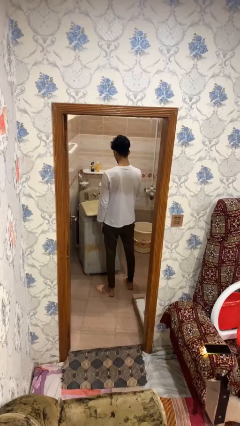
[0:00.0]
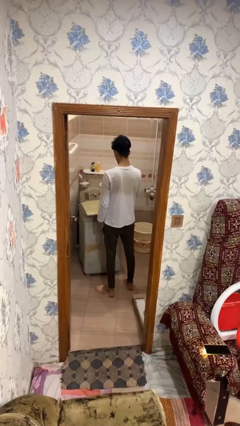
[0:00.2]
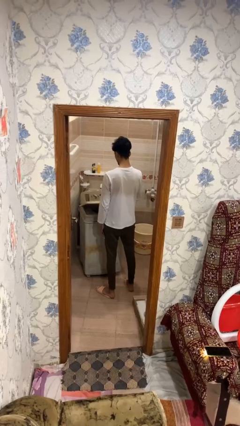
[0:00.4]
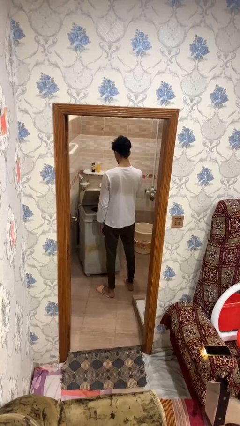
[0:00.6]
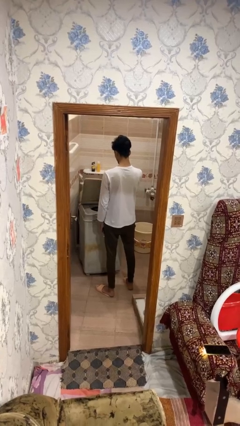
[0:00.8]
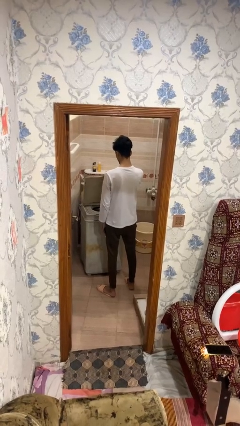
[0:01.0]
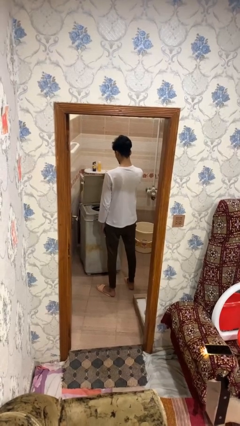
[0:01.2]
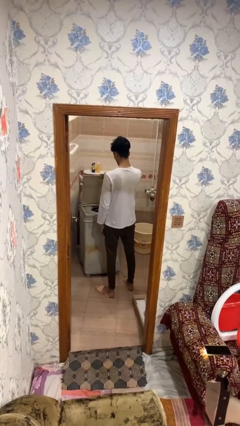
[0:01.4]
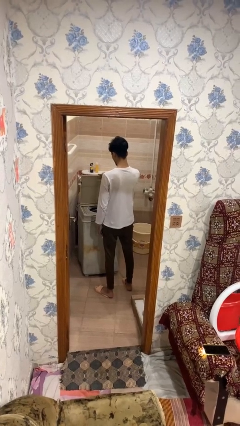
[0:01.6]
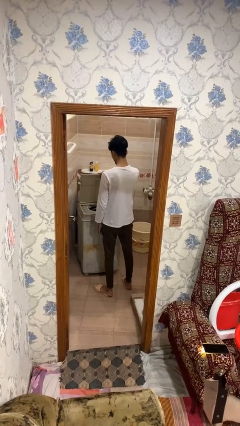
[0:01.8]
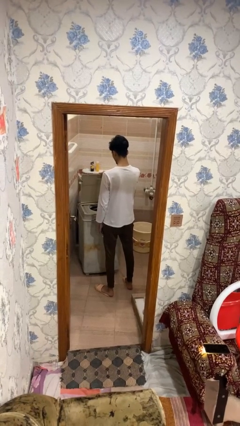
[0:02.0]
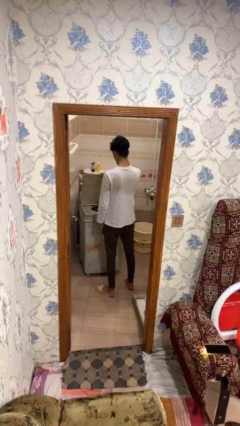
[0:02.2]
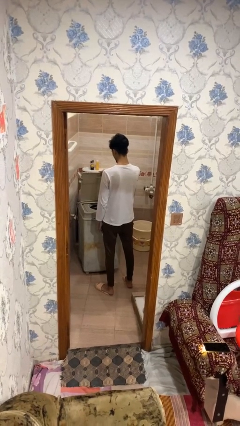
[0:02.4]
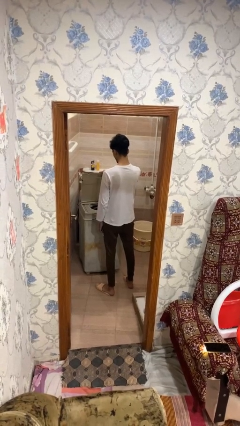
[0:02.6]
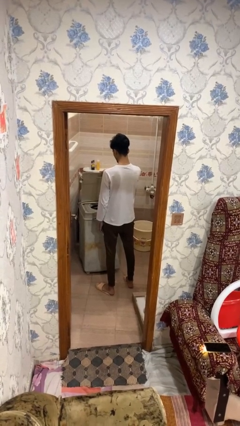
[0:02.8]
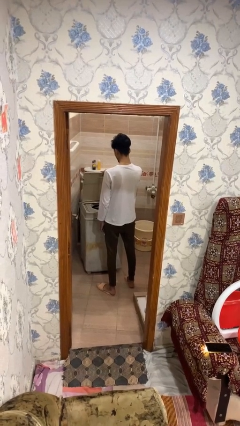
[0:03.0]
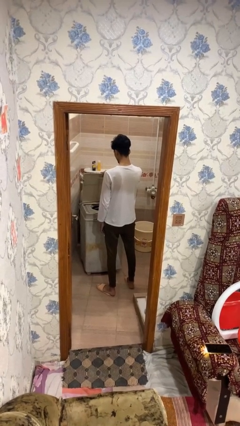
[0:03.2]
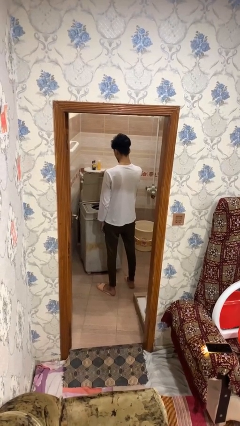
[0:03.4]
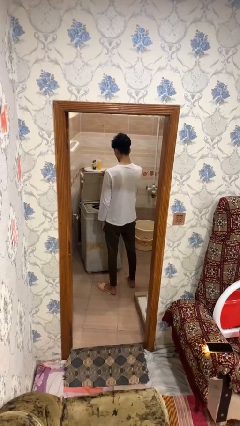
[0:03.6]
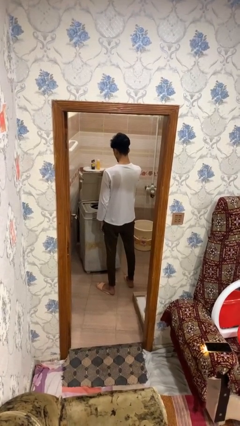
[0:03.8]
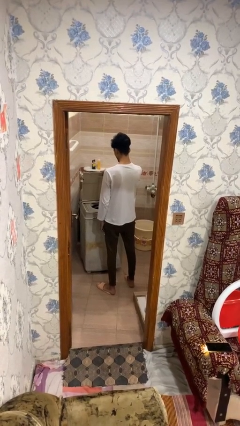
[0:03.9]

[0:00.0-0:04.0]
person opens clothes washer

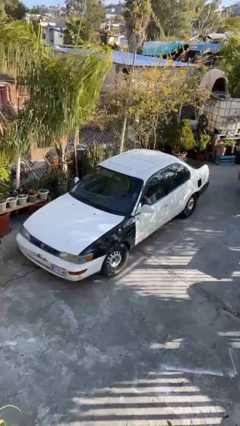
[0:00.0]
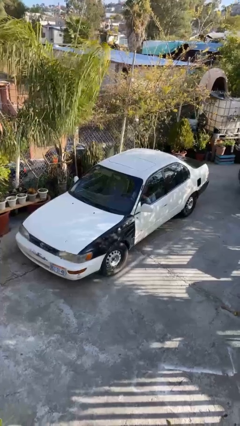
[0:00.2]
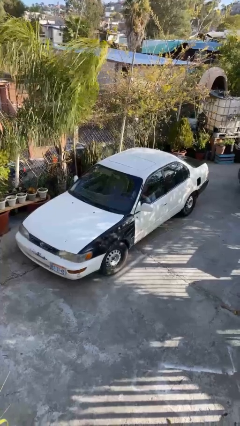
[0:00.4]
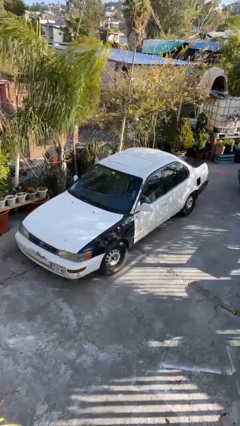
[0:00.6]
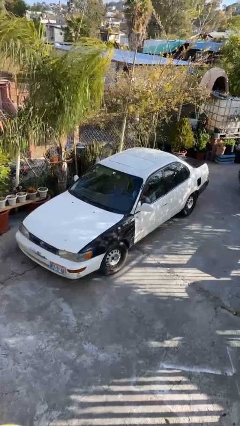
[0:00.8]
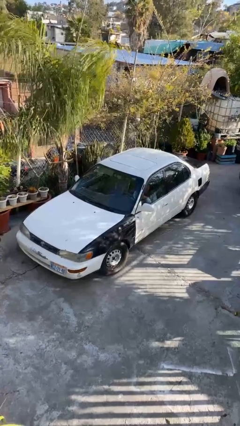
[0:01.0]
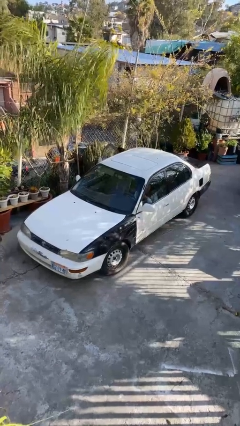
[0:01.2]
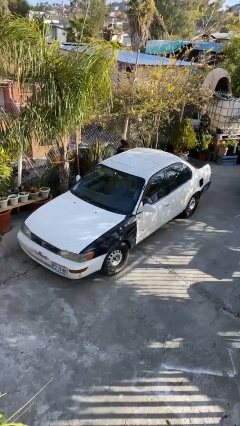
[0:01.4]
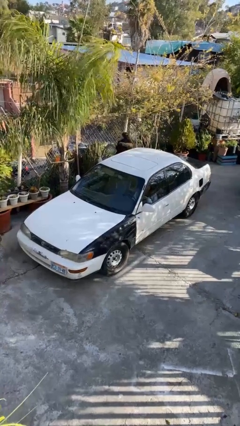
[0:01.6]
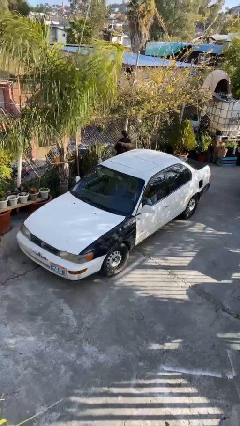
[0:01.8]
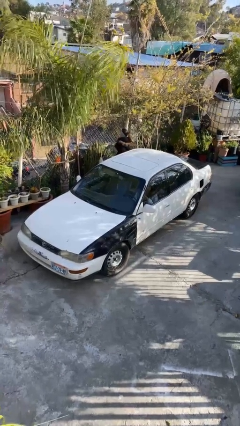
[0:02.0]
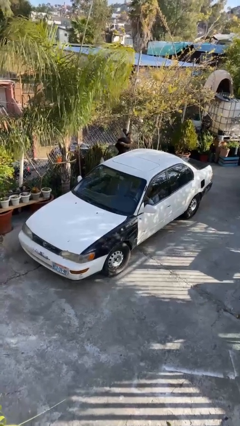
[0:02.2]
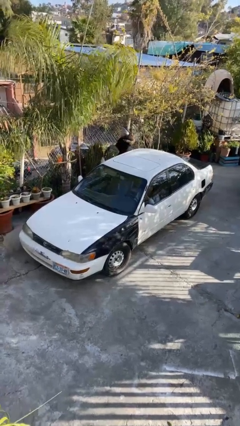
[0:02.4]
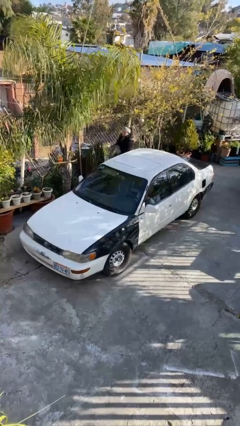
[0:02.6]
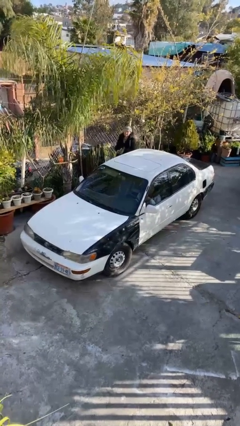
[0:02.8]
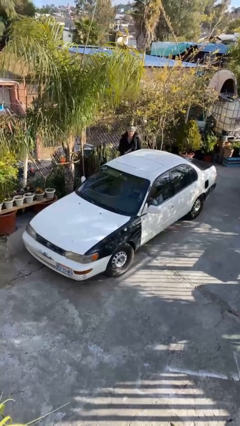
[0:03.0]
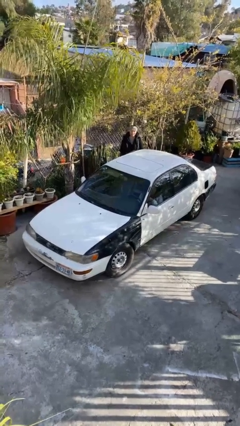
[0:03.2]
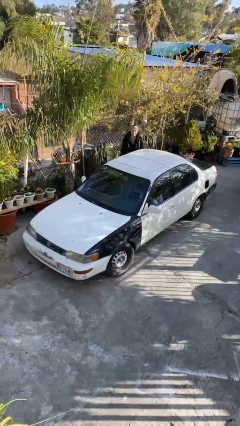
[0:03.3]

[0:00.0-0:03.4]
car drops off person

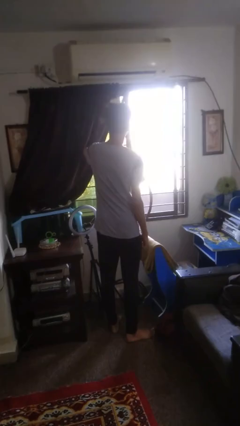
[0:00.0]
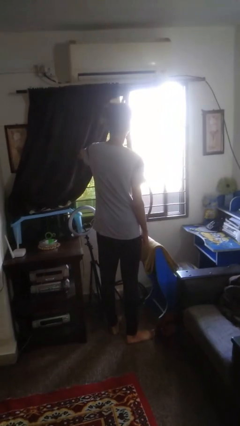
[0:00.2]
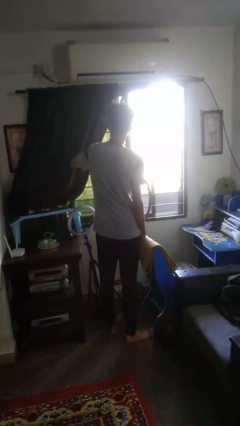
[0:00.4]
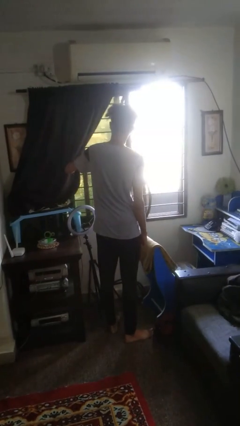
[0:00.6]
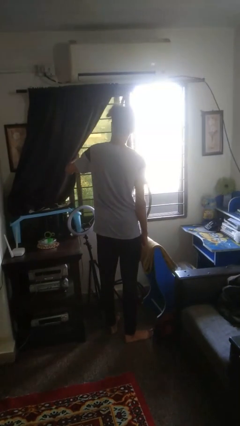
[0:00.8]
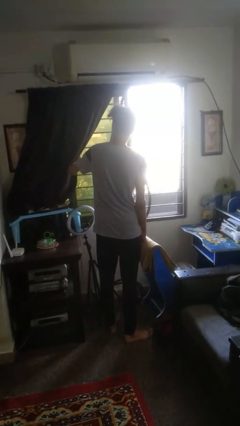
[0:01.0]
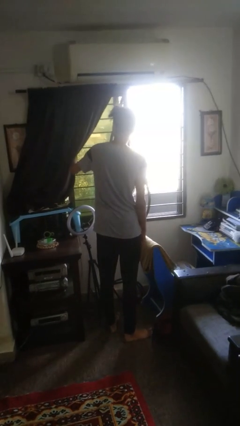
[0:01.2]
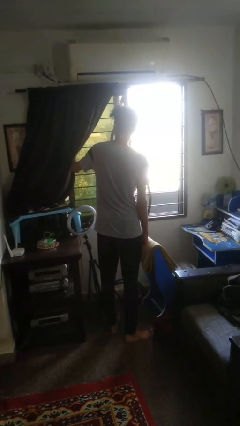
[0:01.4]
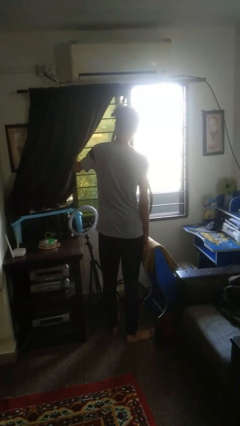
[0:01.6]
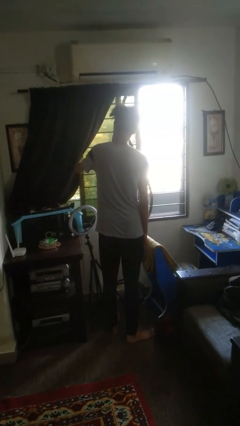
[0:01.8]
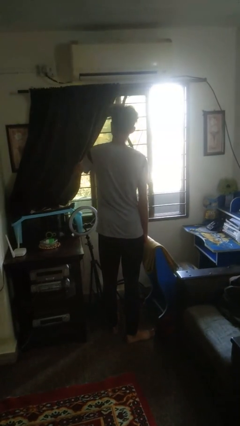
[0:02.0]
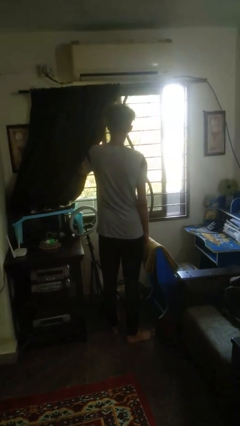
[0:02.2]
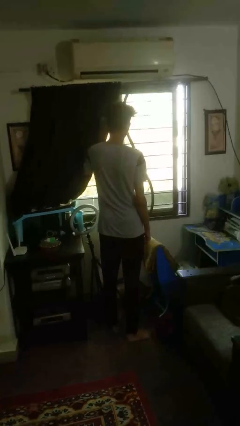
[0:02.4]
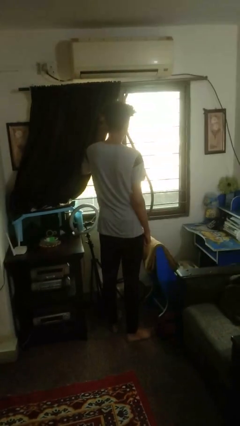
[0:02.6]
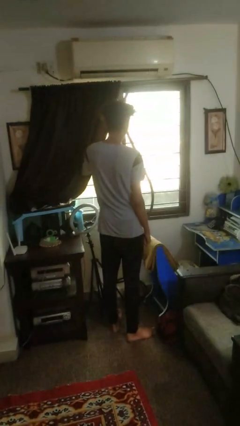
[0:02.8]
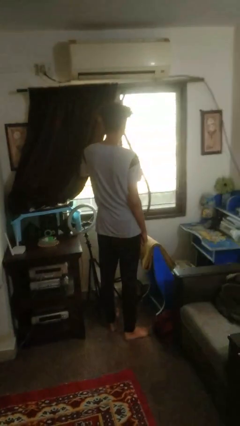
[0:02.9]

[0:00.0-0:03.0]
person closes home window

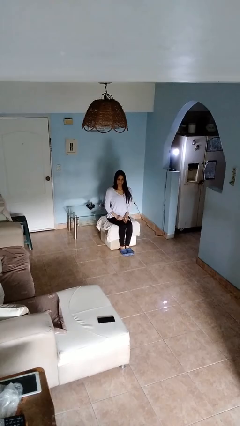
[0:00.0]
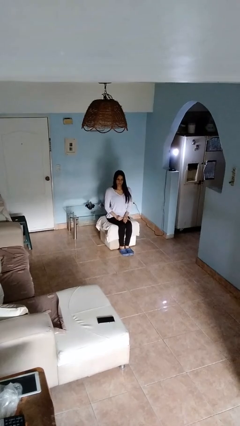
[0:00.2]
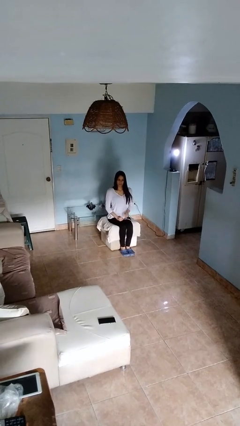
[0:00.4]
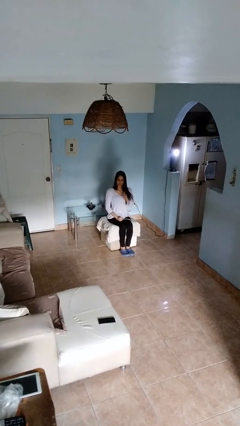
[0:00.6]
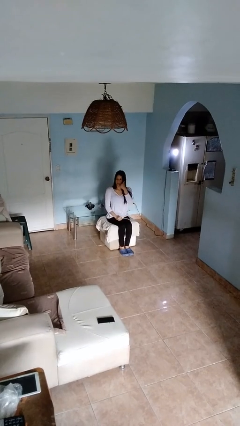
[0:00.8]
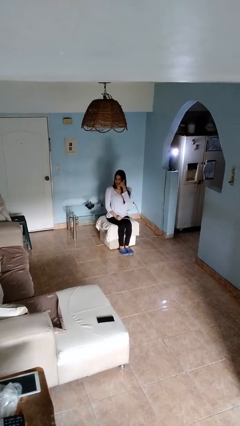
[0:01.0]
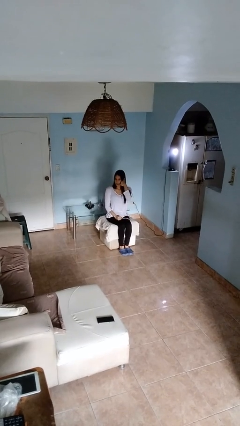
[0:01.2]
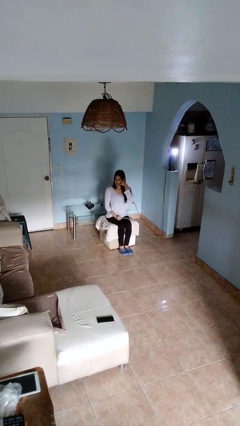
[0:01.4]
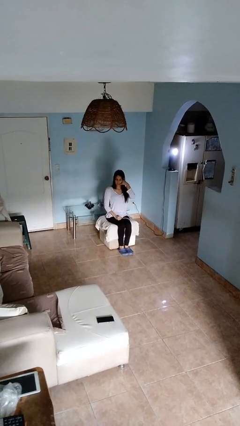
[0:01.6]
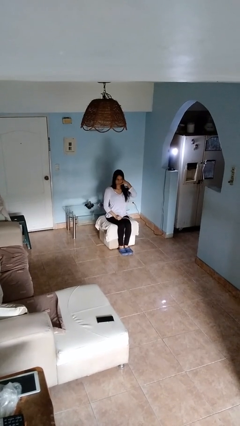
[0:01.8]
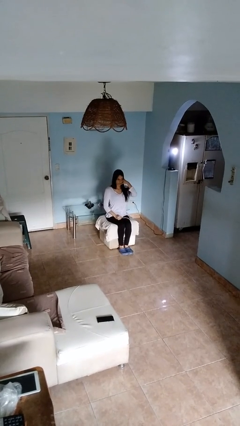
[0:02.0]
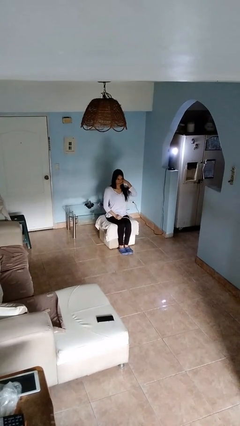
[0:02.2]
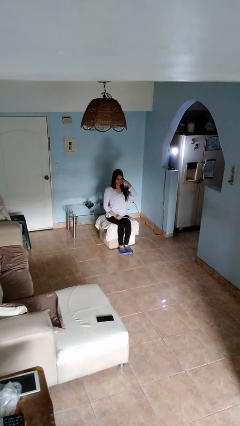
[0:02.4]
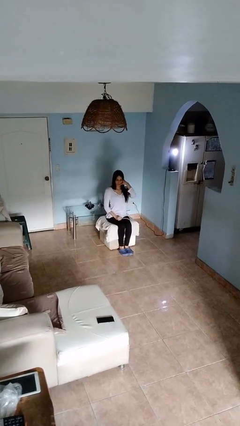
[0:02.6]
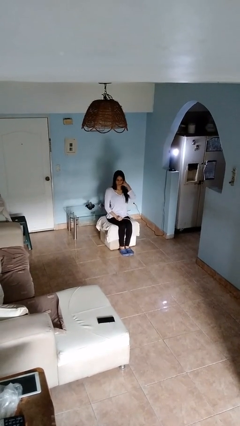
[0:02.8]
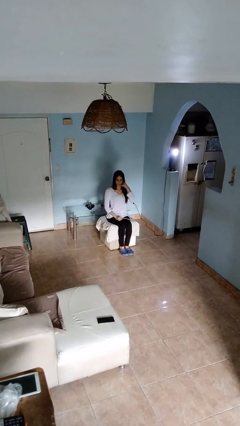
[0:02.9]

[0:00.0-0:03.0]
person gestures call me

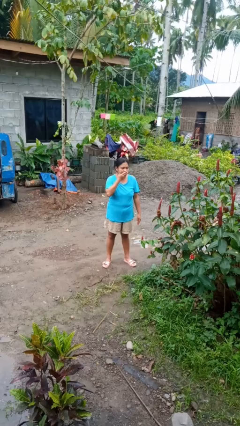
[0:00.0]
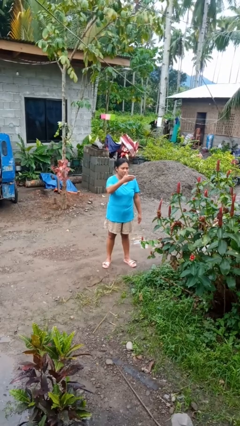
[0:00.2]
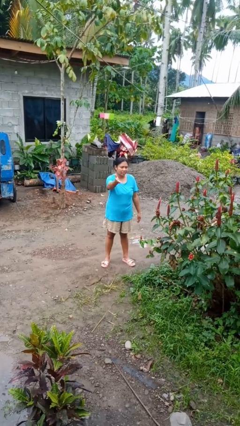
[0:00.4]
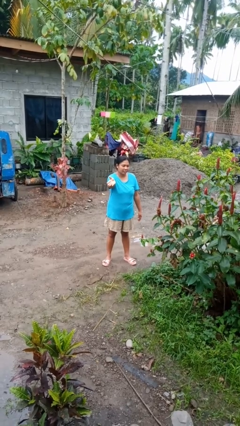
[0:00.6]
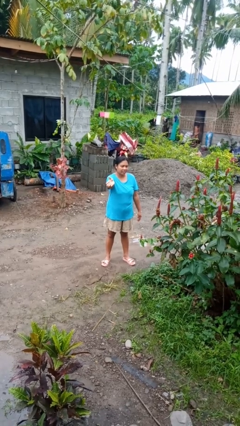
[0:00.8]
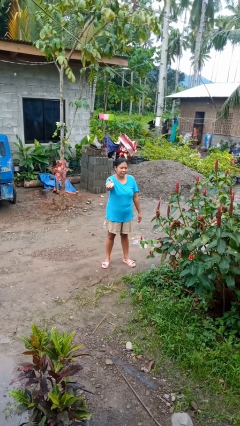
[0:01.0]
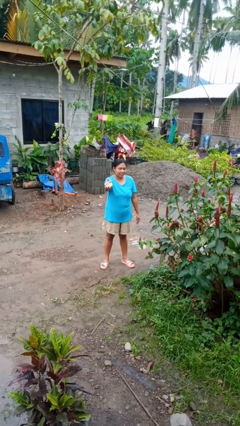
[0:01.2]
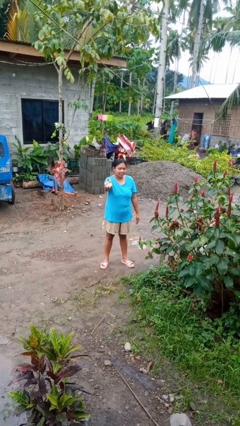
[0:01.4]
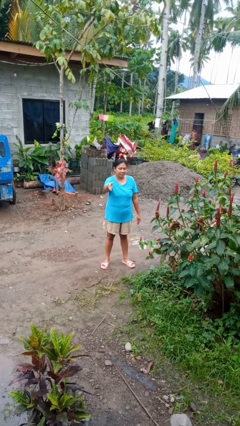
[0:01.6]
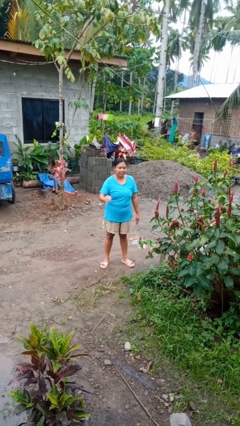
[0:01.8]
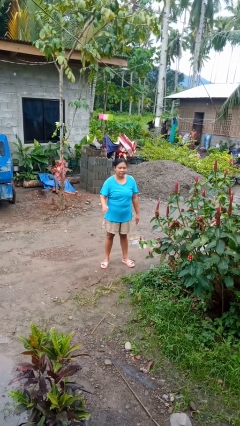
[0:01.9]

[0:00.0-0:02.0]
person gestures blow kiss

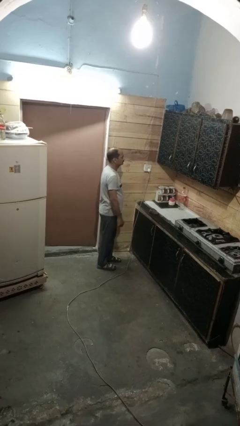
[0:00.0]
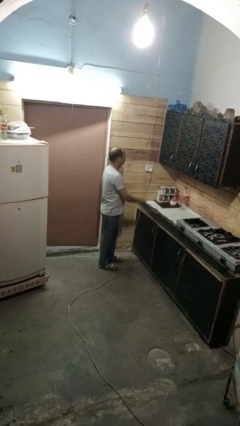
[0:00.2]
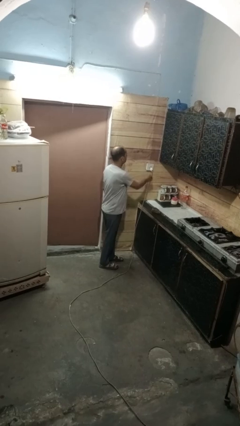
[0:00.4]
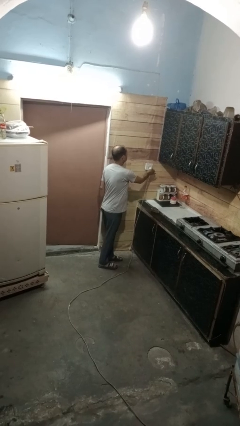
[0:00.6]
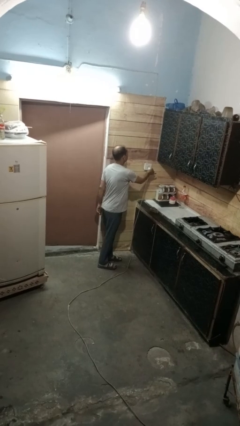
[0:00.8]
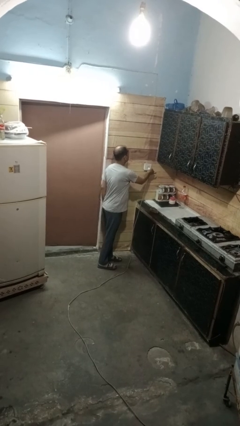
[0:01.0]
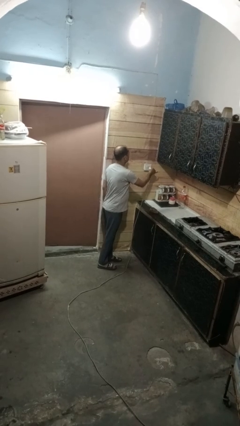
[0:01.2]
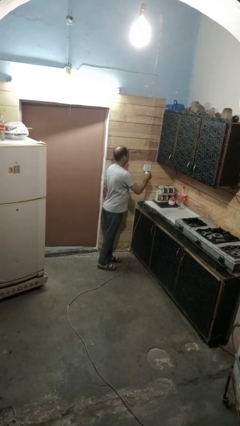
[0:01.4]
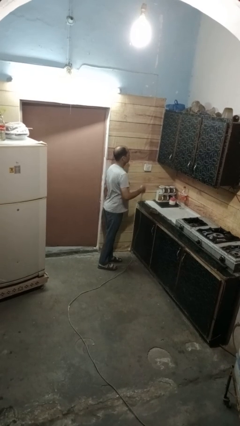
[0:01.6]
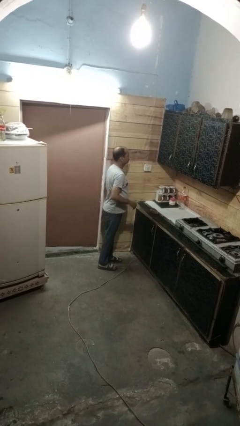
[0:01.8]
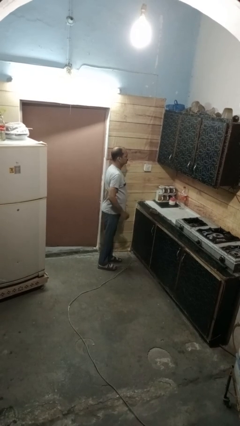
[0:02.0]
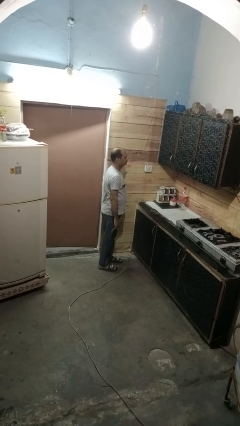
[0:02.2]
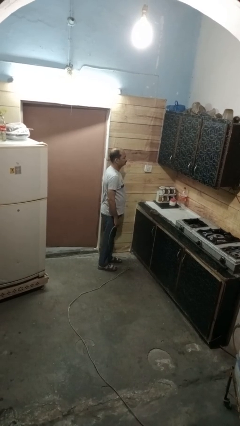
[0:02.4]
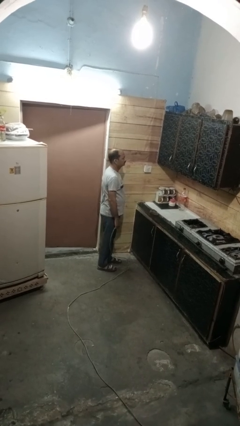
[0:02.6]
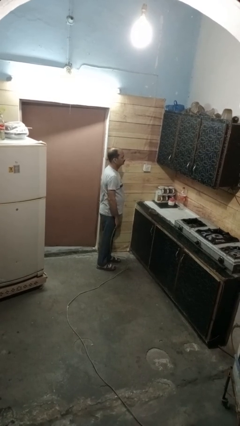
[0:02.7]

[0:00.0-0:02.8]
person unplugs from electrical socket
